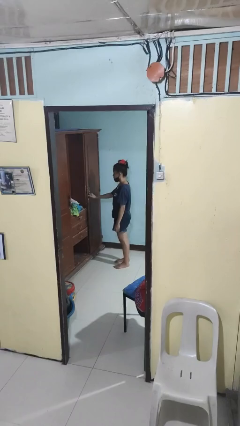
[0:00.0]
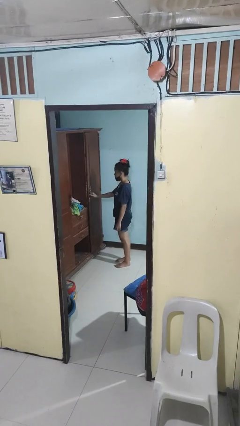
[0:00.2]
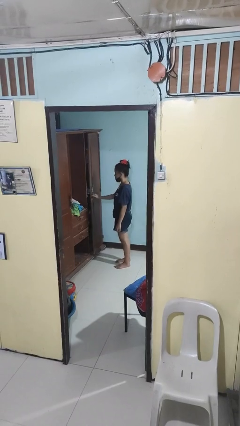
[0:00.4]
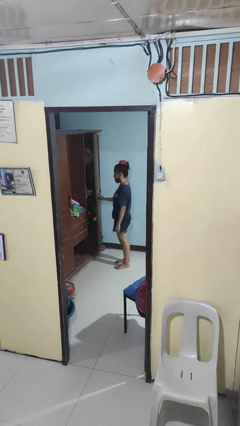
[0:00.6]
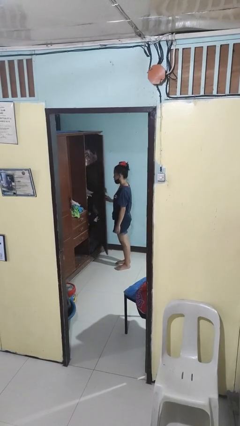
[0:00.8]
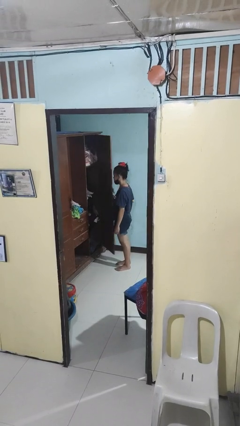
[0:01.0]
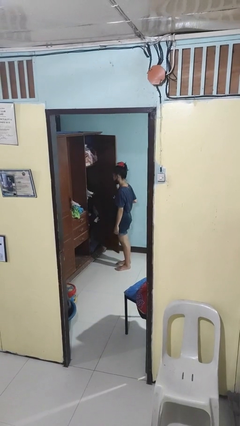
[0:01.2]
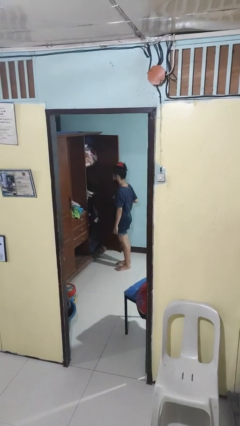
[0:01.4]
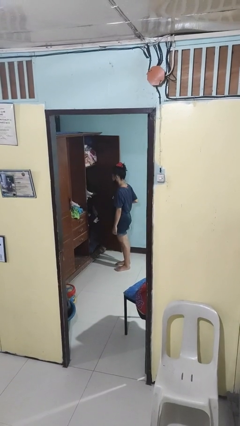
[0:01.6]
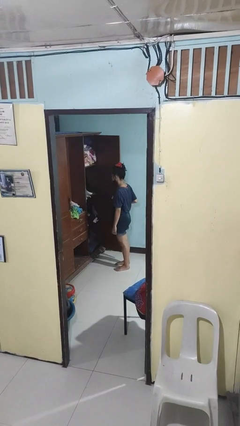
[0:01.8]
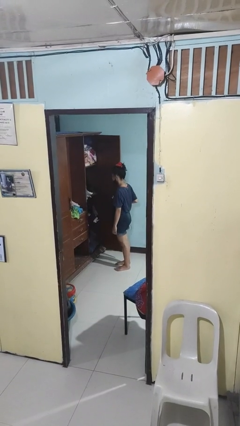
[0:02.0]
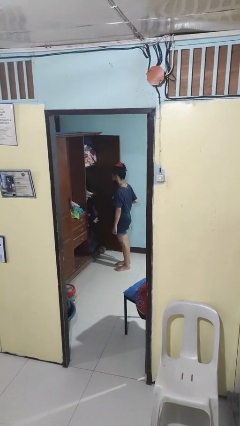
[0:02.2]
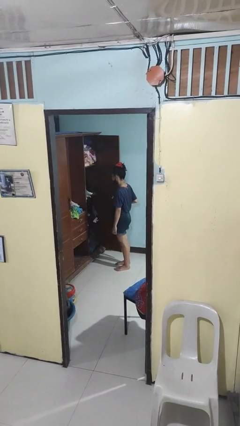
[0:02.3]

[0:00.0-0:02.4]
person opens closet door

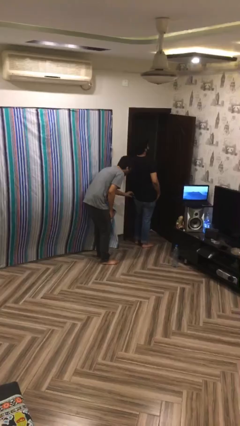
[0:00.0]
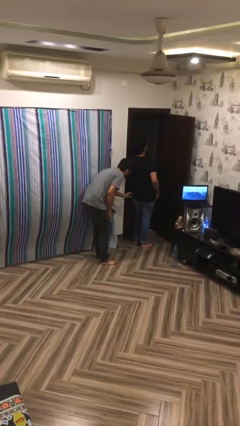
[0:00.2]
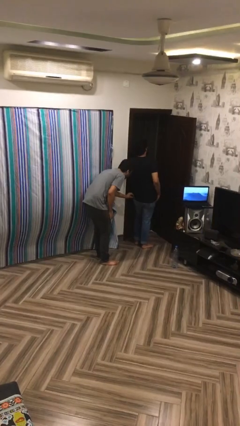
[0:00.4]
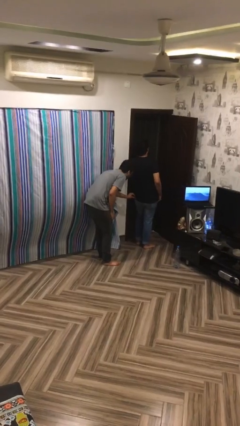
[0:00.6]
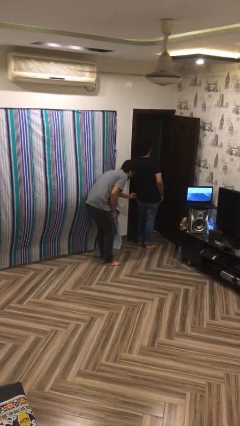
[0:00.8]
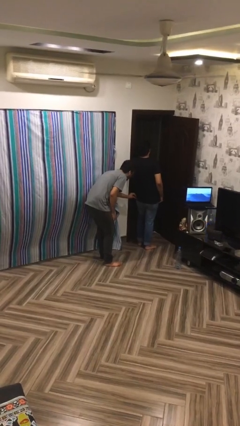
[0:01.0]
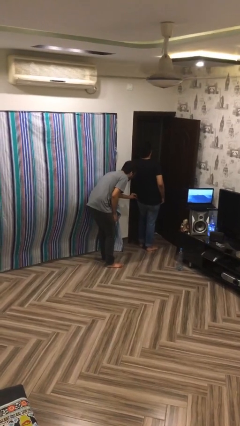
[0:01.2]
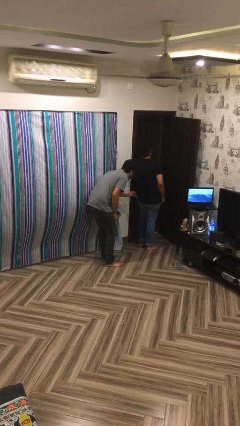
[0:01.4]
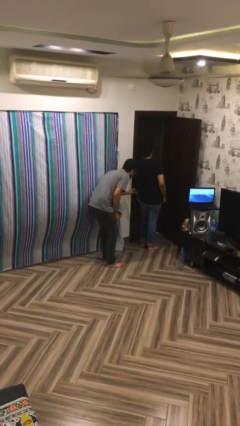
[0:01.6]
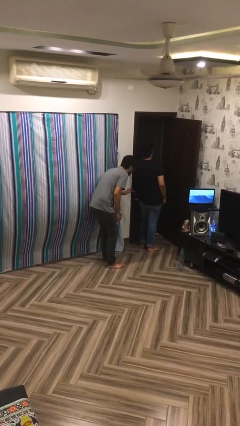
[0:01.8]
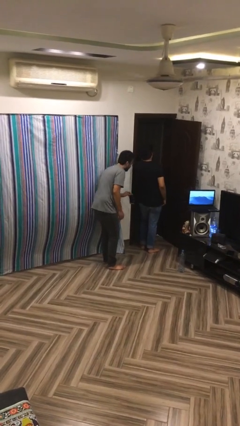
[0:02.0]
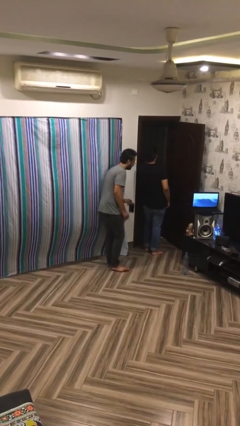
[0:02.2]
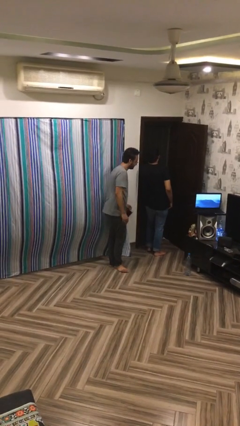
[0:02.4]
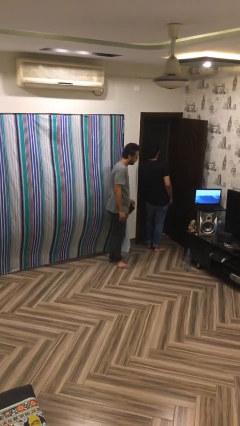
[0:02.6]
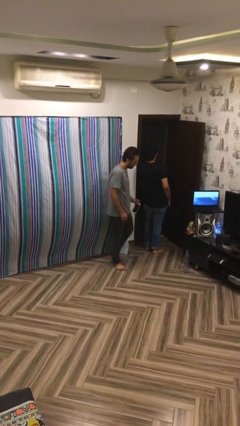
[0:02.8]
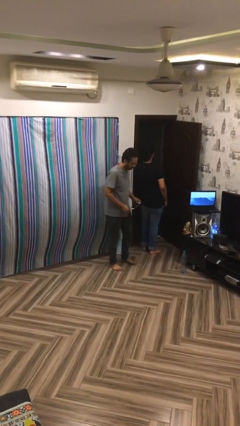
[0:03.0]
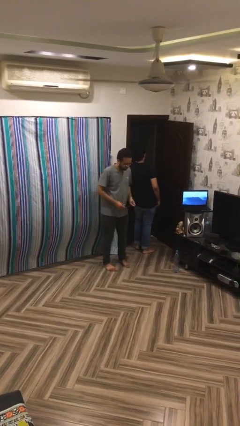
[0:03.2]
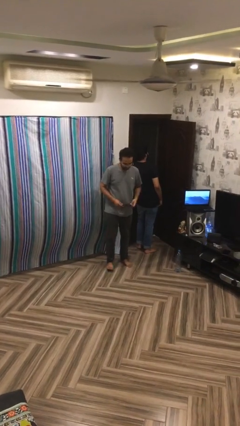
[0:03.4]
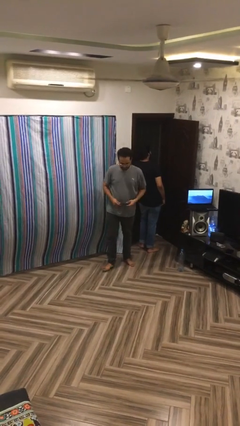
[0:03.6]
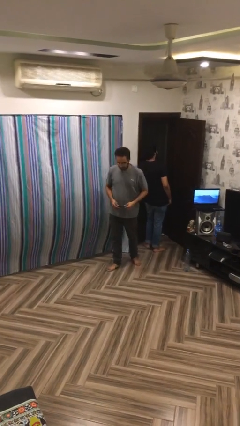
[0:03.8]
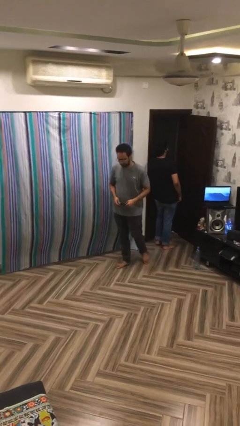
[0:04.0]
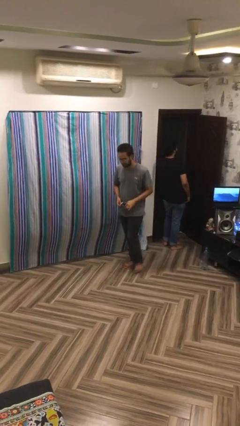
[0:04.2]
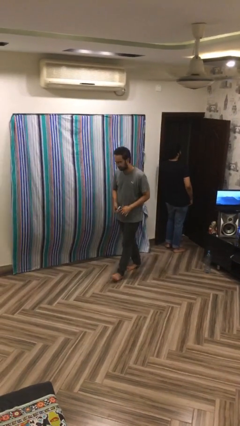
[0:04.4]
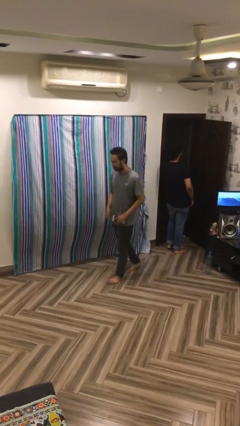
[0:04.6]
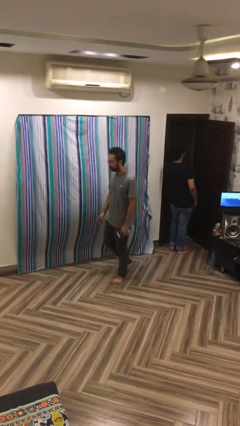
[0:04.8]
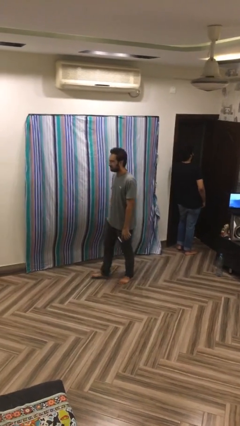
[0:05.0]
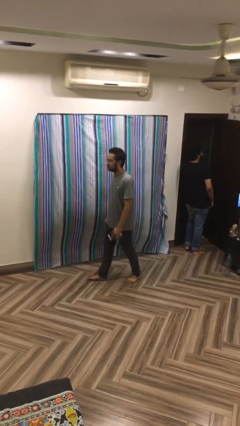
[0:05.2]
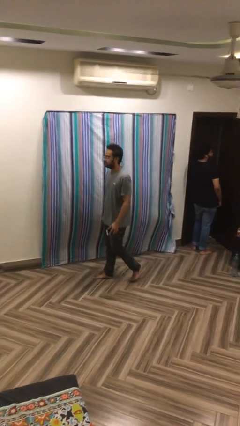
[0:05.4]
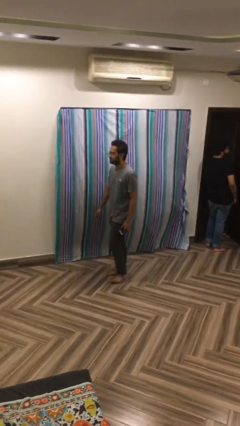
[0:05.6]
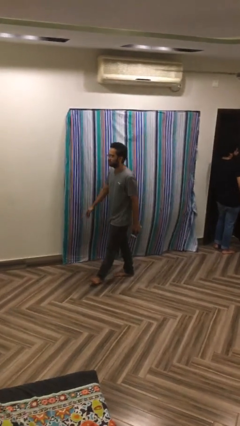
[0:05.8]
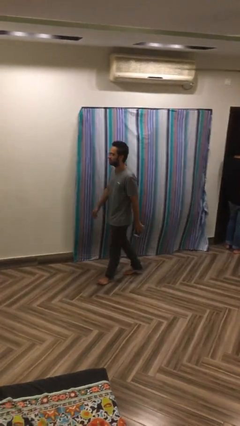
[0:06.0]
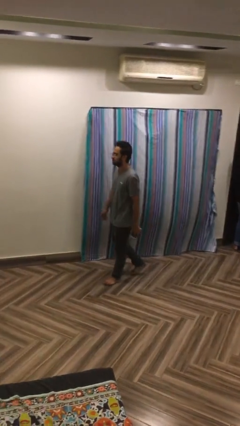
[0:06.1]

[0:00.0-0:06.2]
person steals object from person

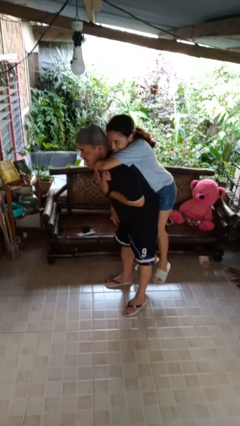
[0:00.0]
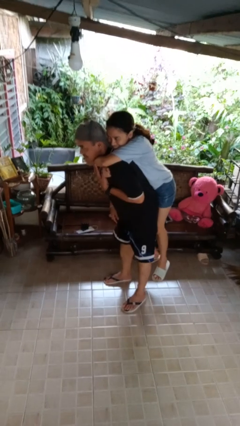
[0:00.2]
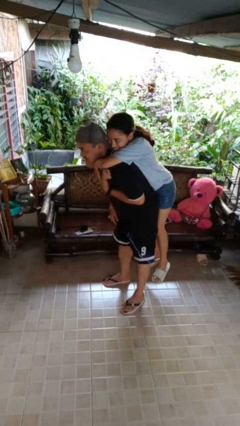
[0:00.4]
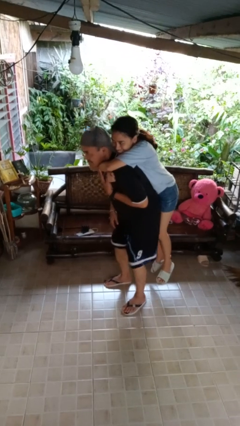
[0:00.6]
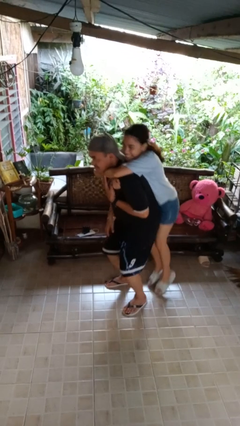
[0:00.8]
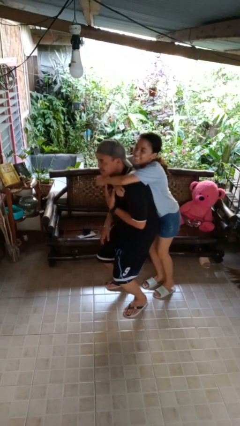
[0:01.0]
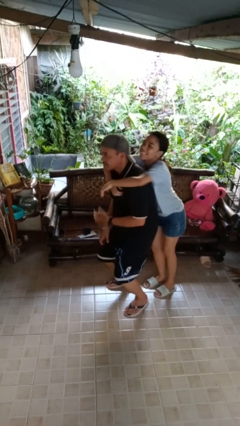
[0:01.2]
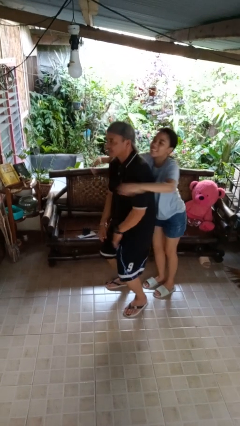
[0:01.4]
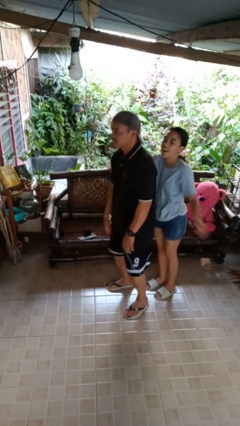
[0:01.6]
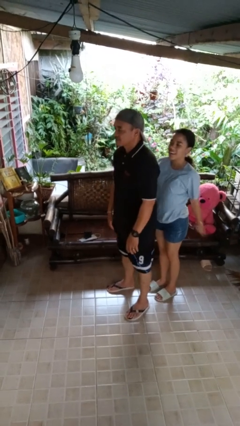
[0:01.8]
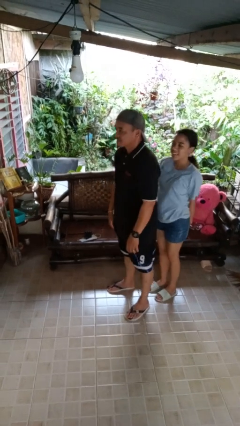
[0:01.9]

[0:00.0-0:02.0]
person puts down person

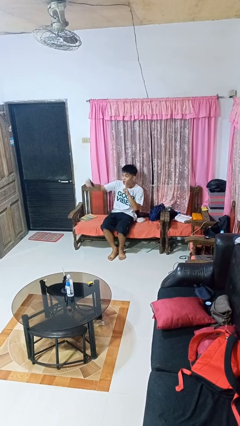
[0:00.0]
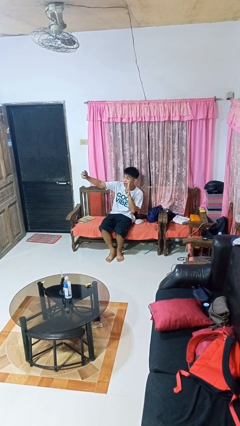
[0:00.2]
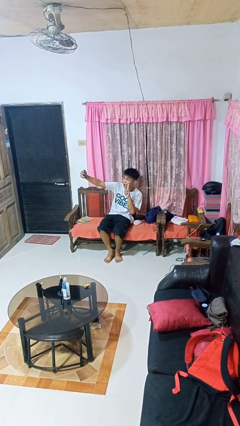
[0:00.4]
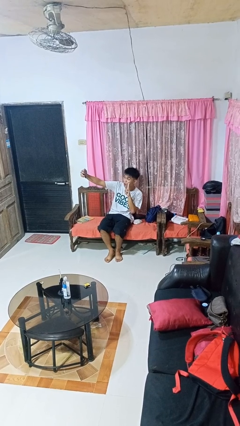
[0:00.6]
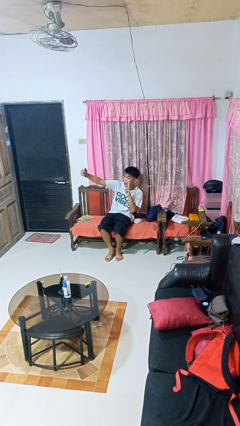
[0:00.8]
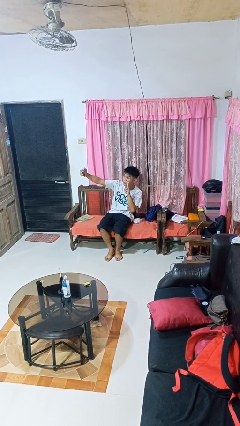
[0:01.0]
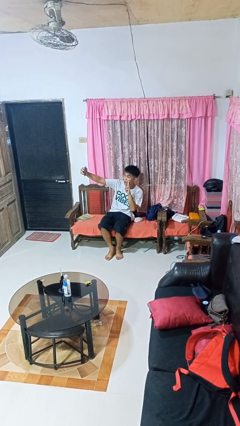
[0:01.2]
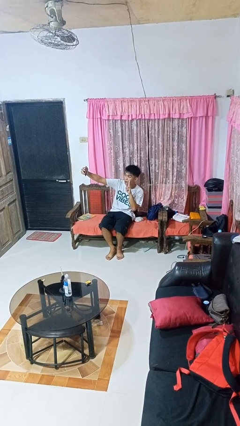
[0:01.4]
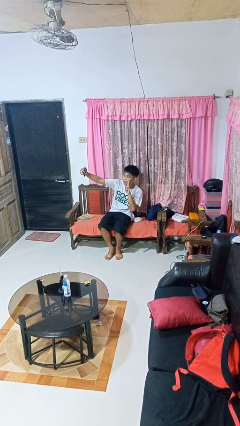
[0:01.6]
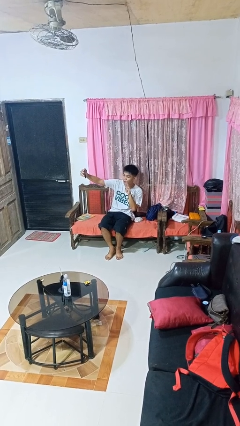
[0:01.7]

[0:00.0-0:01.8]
person takes selfie

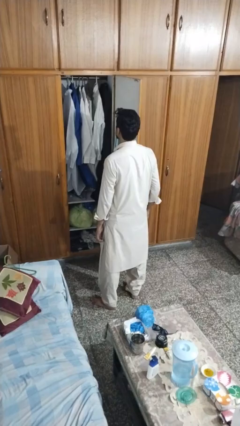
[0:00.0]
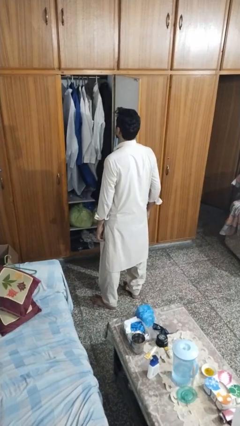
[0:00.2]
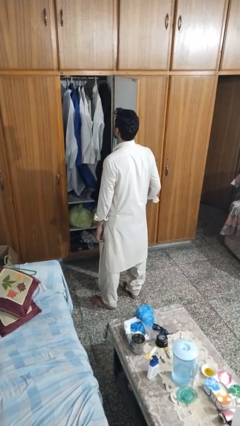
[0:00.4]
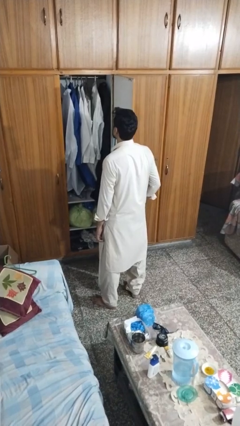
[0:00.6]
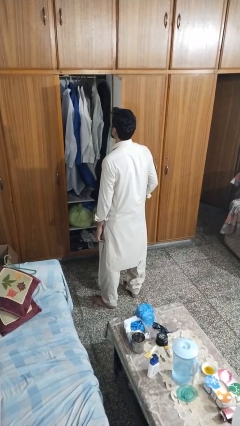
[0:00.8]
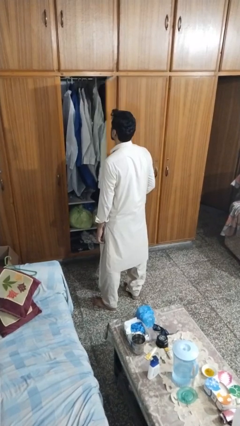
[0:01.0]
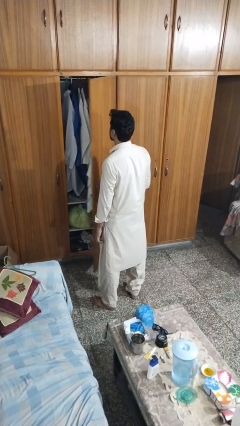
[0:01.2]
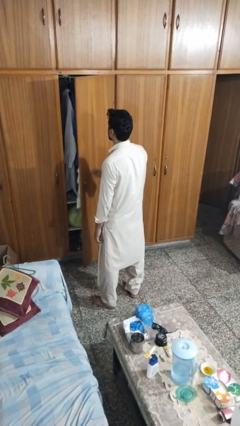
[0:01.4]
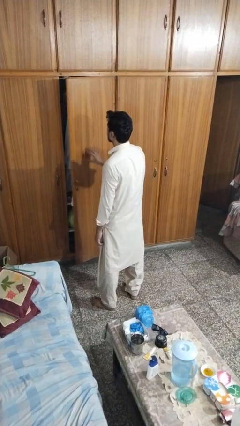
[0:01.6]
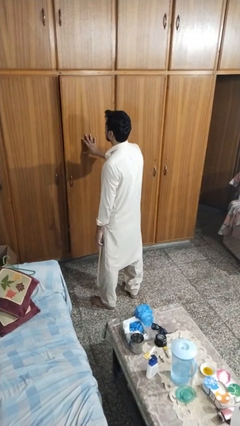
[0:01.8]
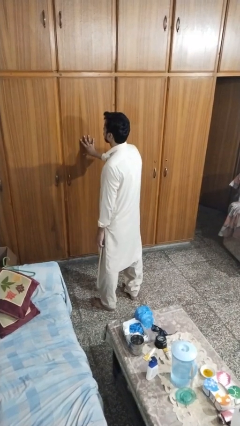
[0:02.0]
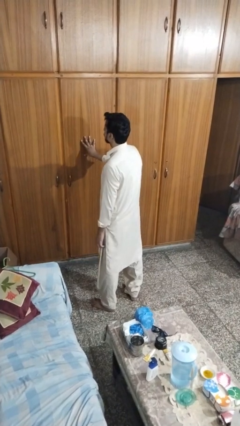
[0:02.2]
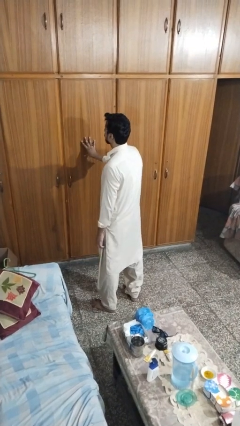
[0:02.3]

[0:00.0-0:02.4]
person closes closet door

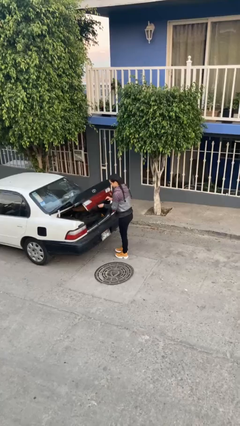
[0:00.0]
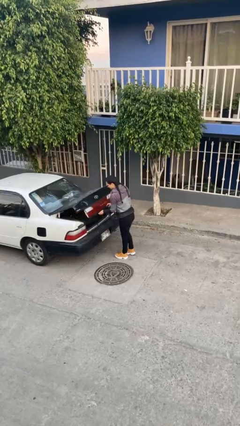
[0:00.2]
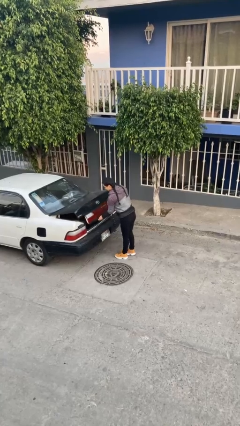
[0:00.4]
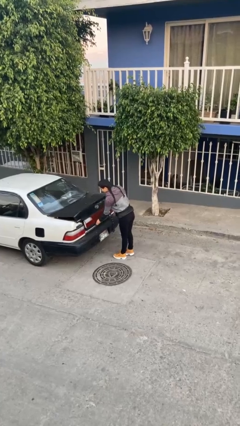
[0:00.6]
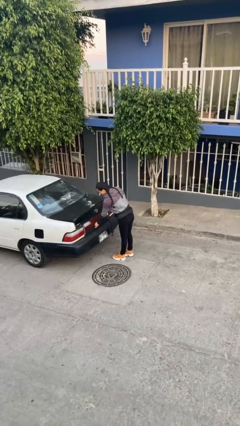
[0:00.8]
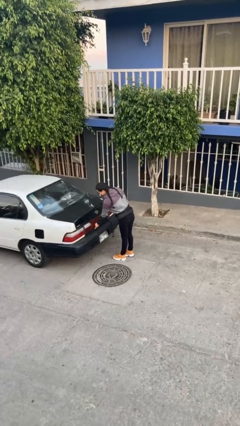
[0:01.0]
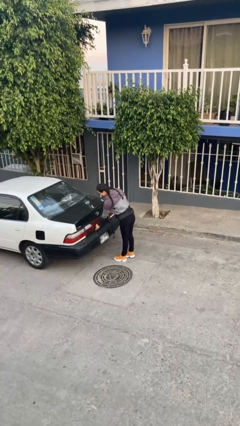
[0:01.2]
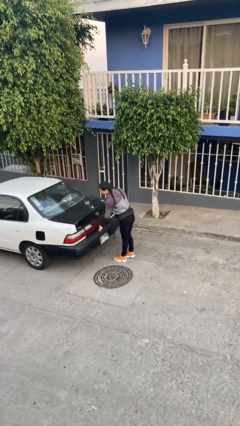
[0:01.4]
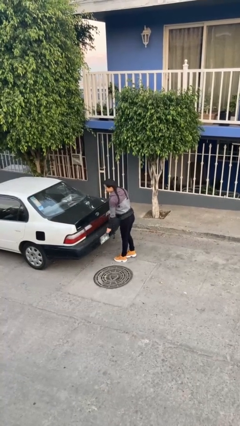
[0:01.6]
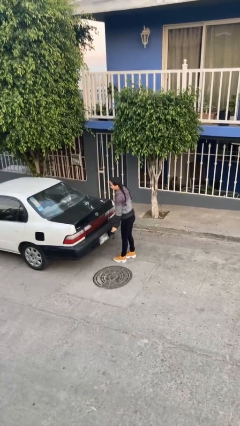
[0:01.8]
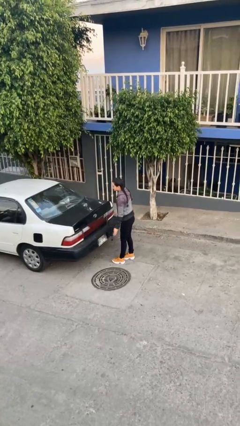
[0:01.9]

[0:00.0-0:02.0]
person closes car trunk

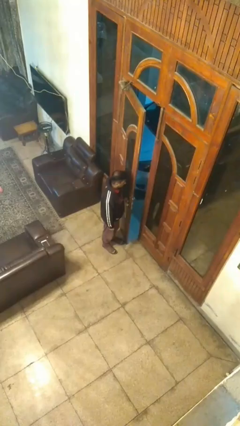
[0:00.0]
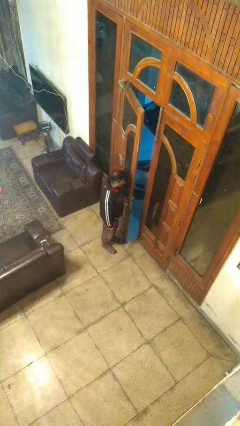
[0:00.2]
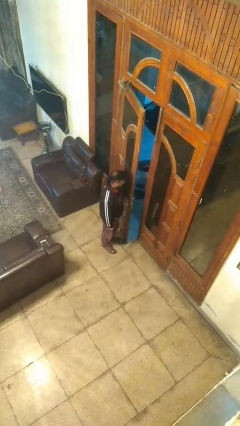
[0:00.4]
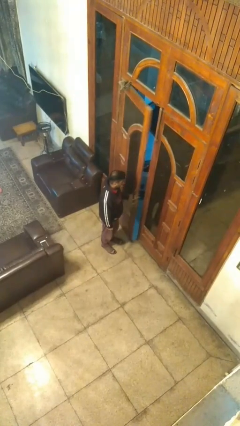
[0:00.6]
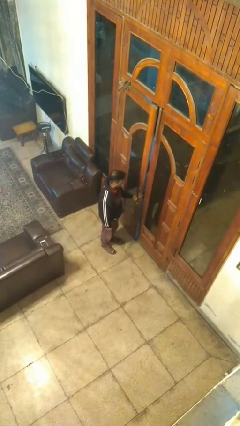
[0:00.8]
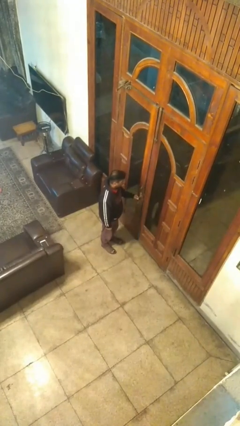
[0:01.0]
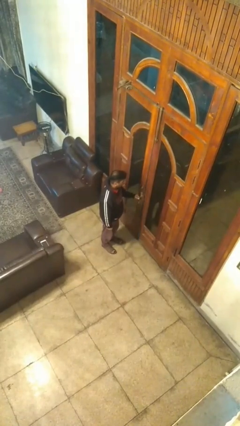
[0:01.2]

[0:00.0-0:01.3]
person closes facility door
